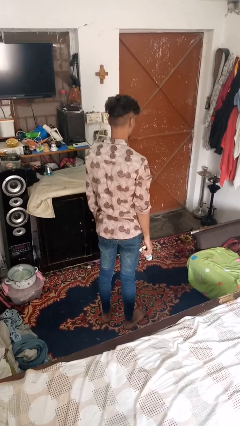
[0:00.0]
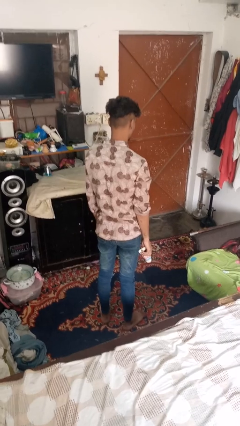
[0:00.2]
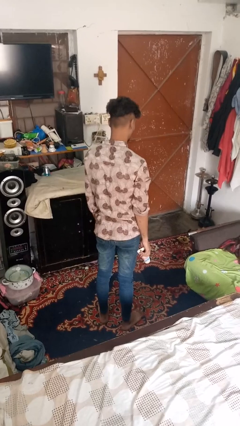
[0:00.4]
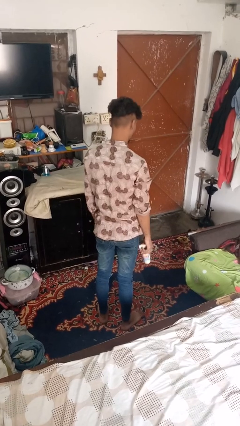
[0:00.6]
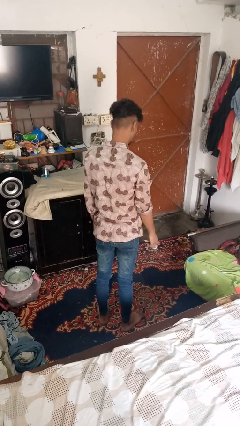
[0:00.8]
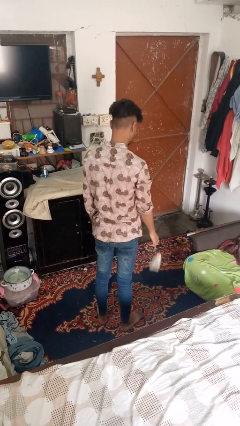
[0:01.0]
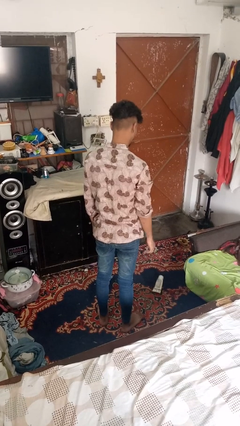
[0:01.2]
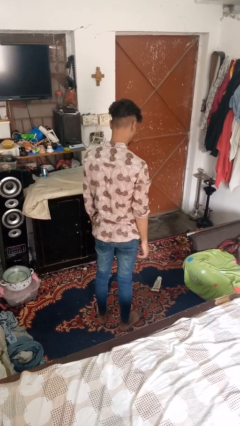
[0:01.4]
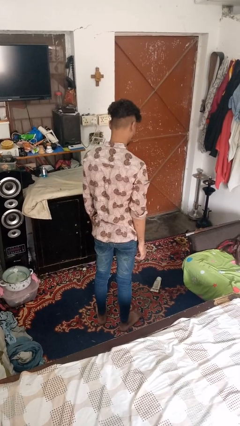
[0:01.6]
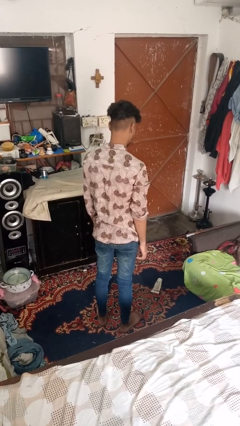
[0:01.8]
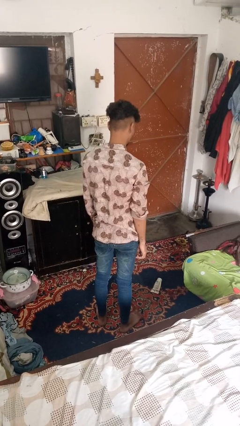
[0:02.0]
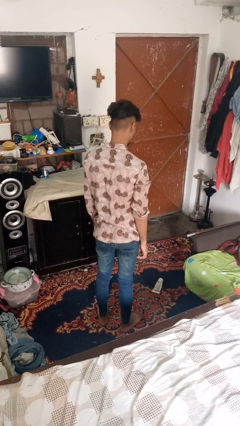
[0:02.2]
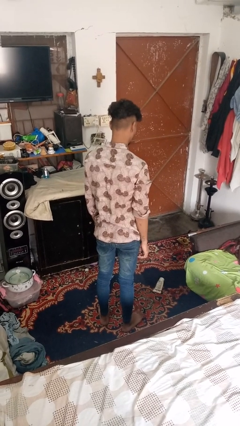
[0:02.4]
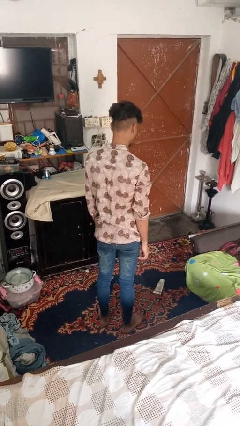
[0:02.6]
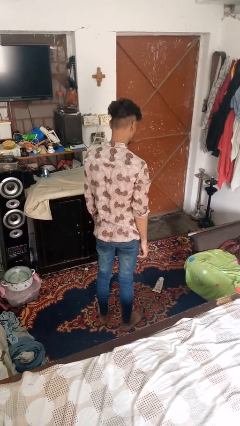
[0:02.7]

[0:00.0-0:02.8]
person throws object to ground

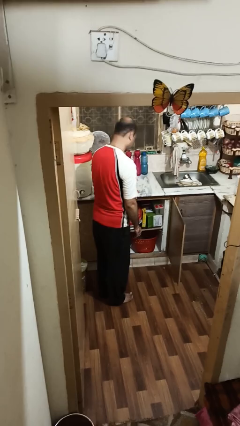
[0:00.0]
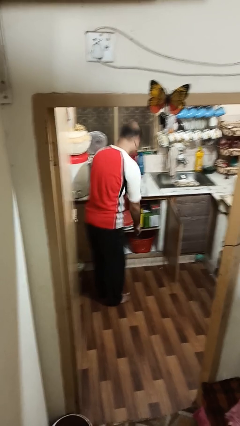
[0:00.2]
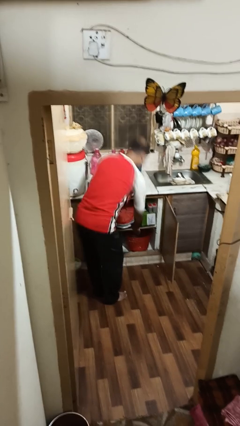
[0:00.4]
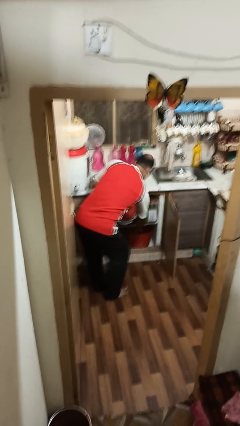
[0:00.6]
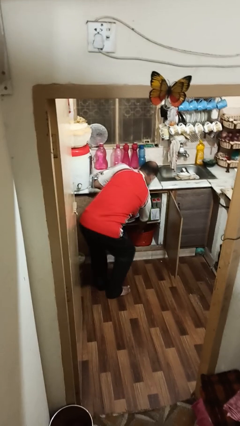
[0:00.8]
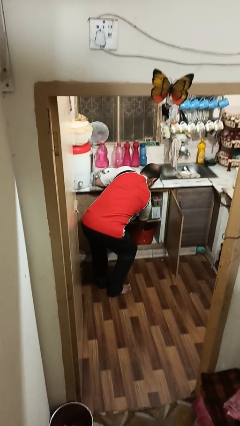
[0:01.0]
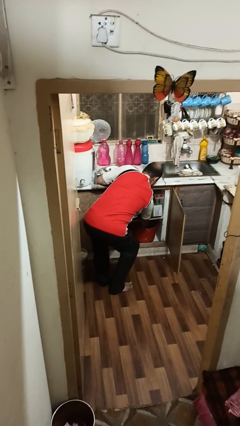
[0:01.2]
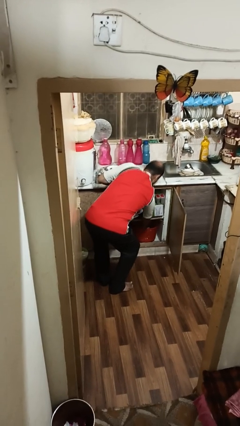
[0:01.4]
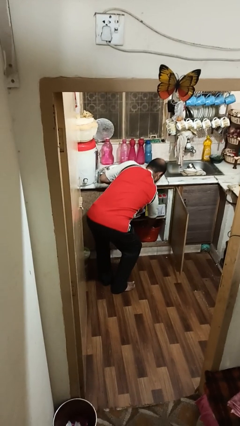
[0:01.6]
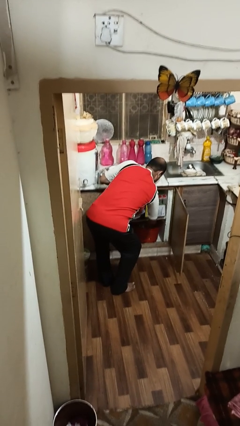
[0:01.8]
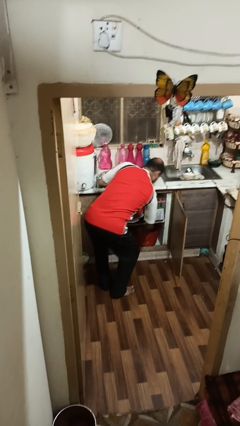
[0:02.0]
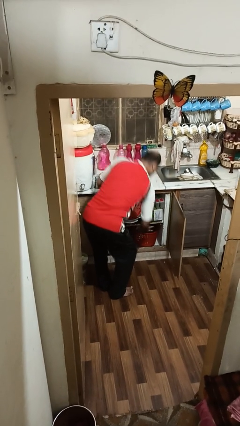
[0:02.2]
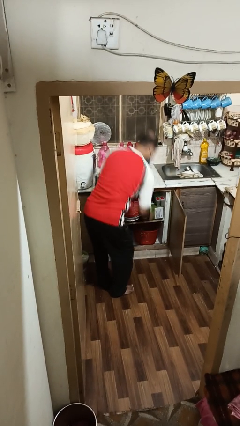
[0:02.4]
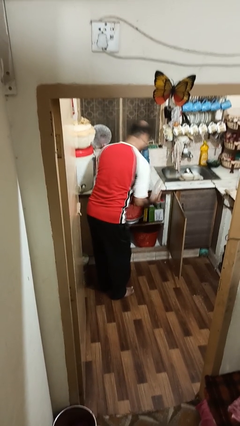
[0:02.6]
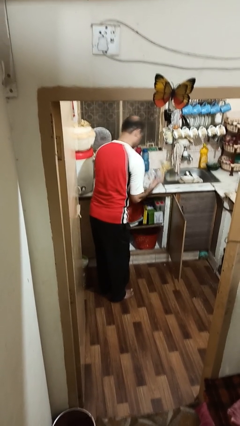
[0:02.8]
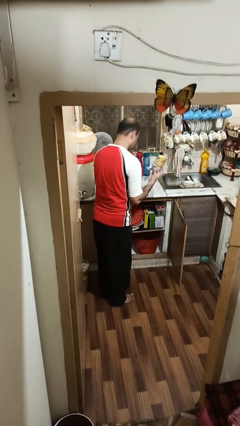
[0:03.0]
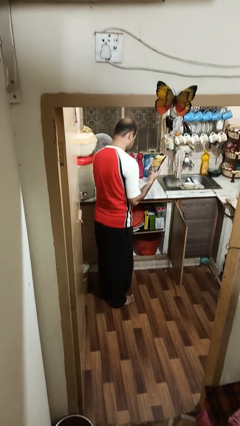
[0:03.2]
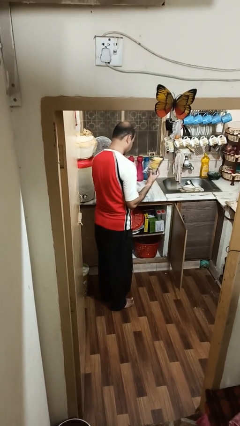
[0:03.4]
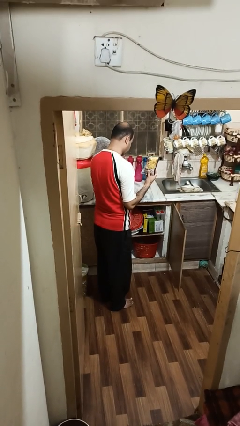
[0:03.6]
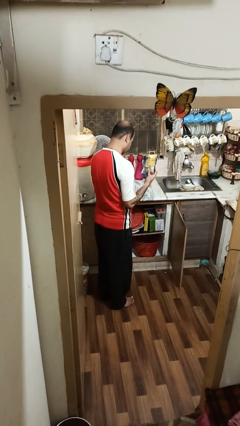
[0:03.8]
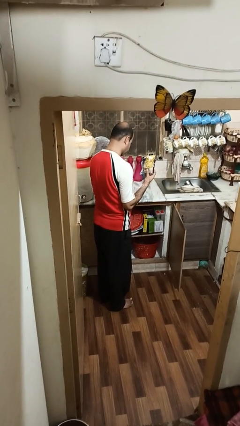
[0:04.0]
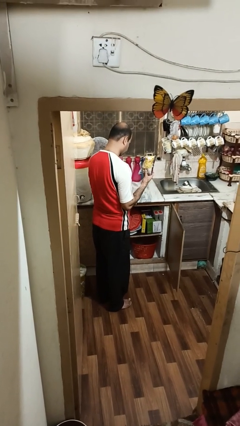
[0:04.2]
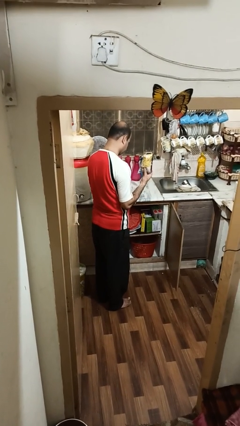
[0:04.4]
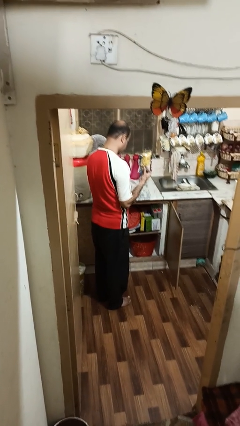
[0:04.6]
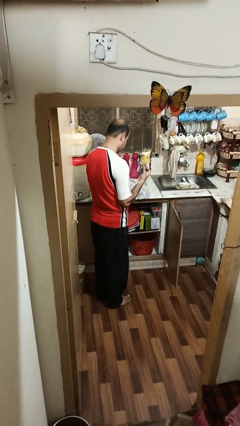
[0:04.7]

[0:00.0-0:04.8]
person takes object from cabinet

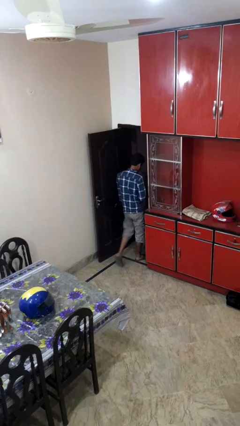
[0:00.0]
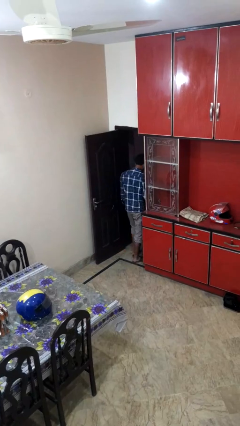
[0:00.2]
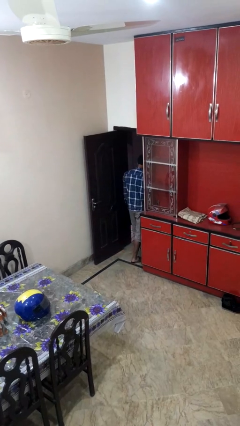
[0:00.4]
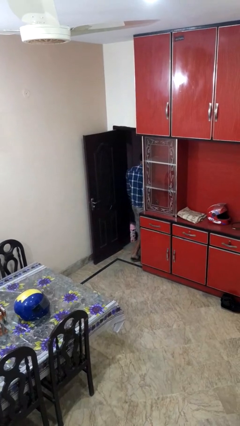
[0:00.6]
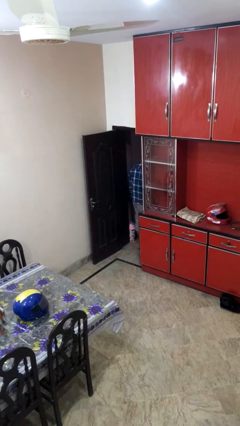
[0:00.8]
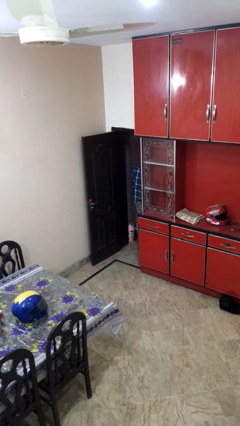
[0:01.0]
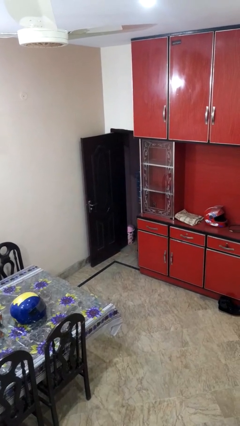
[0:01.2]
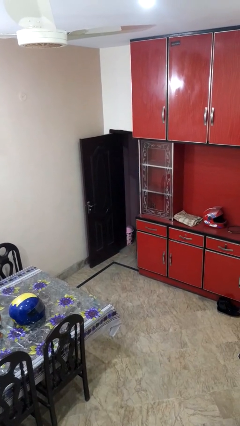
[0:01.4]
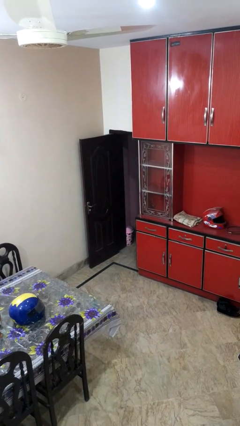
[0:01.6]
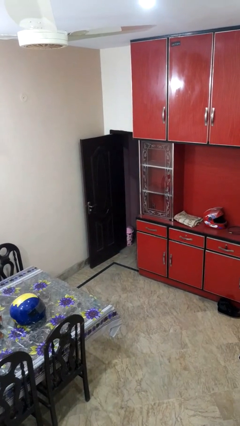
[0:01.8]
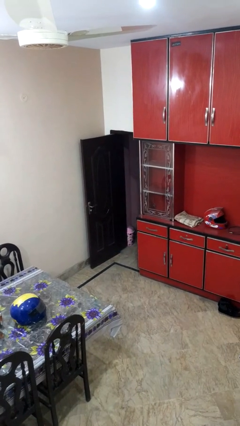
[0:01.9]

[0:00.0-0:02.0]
person exits scene through structure

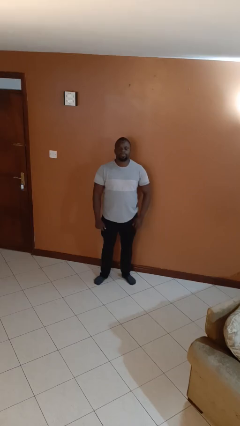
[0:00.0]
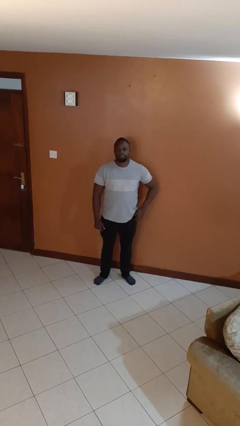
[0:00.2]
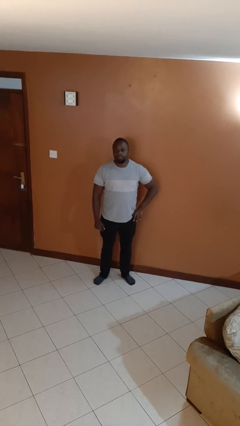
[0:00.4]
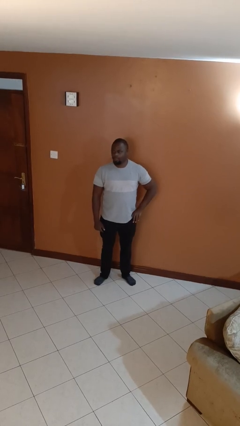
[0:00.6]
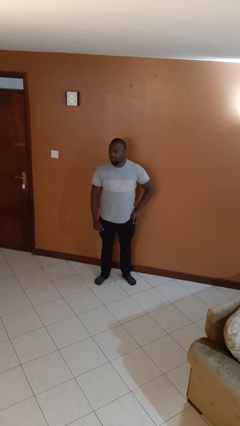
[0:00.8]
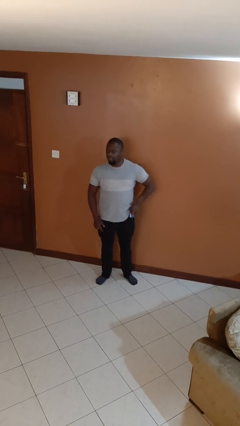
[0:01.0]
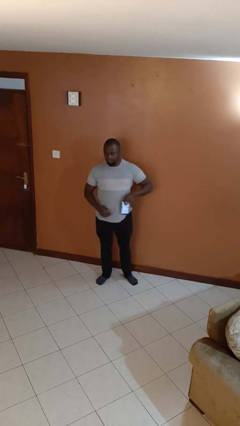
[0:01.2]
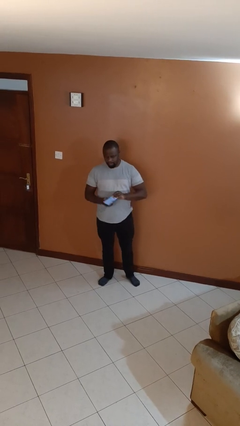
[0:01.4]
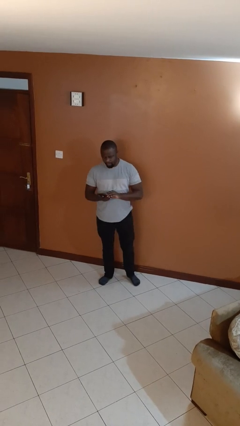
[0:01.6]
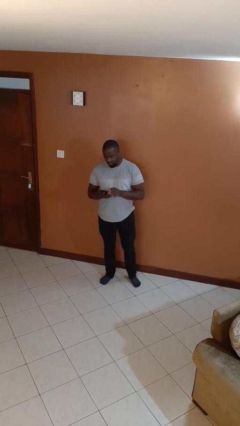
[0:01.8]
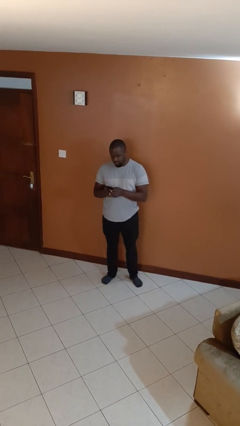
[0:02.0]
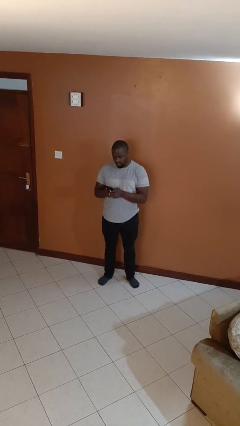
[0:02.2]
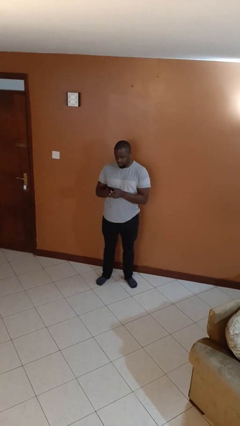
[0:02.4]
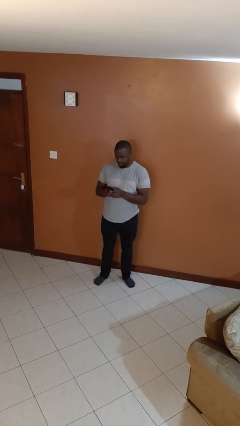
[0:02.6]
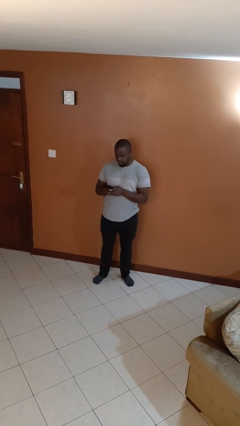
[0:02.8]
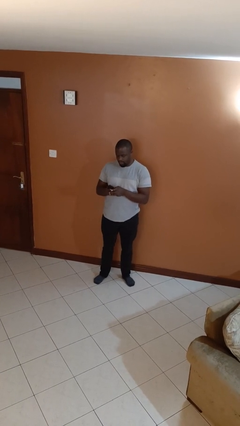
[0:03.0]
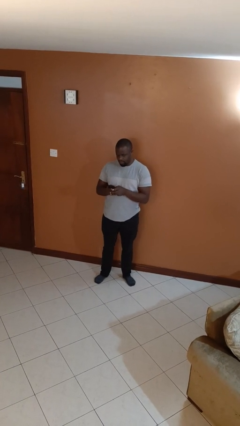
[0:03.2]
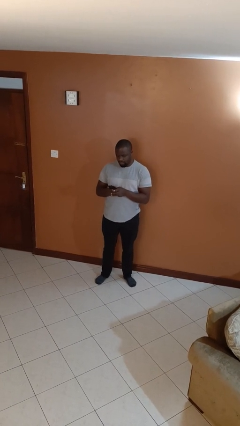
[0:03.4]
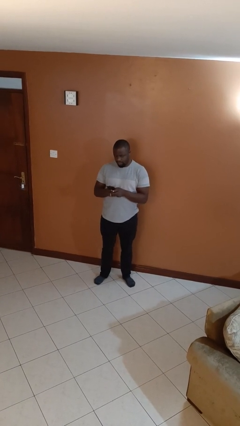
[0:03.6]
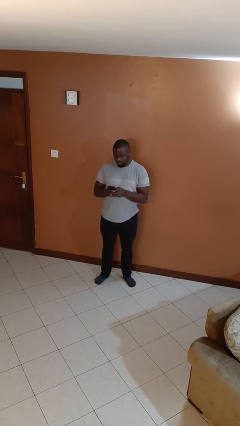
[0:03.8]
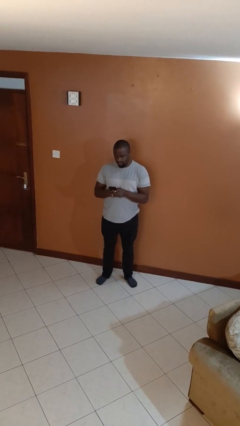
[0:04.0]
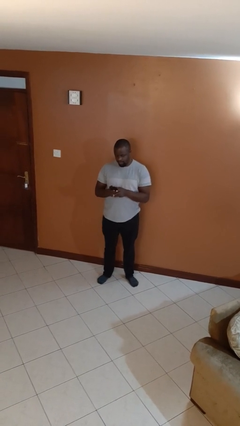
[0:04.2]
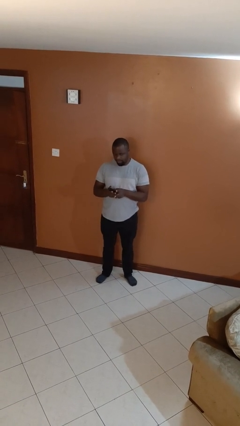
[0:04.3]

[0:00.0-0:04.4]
person takes phone from pocket

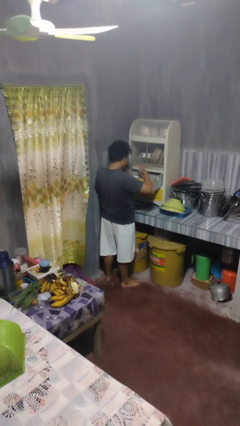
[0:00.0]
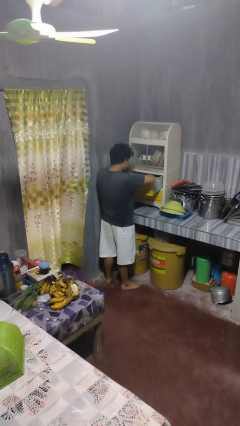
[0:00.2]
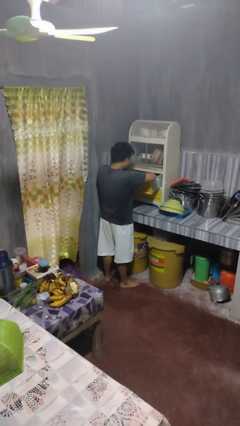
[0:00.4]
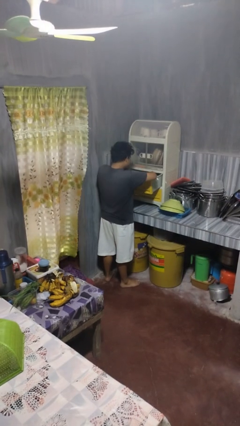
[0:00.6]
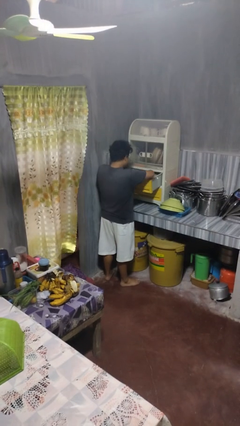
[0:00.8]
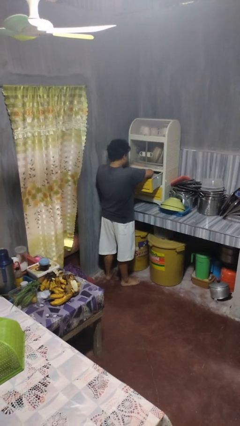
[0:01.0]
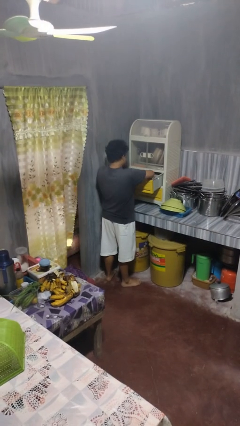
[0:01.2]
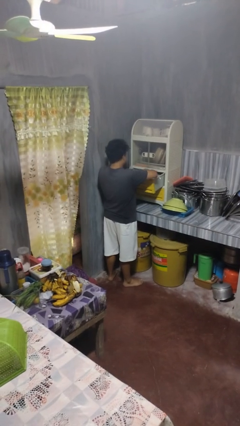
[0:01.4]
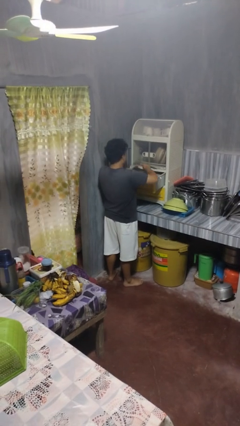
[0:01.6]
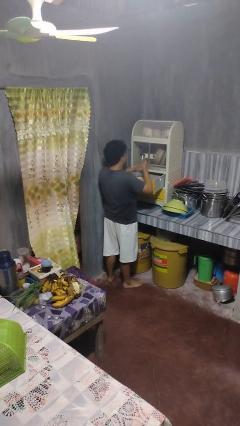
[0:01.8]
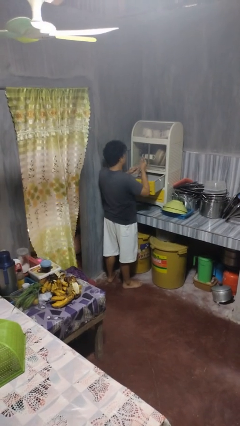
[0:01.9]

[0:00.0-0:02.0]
person takes object from kitchen drawer

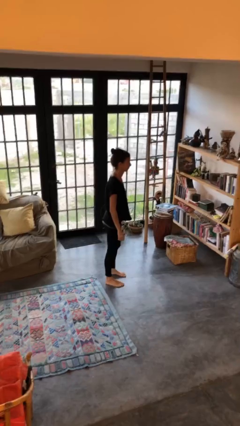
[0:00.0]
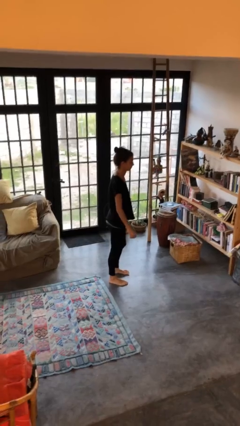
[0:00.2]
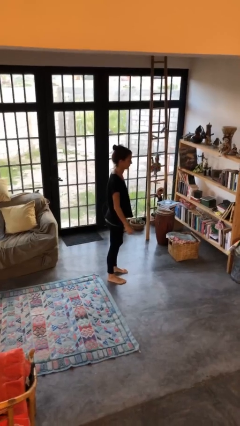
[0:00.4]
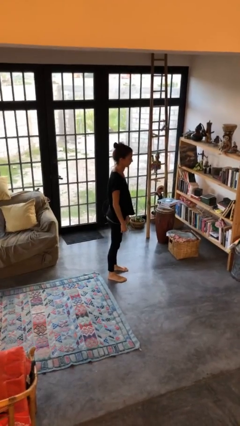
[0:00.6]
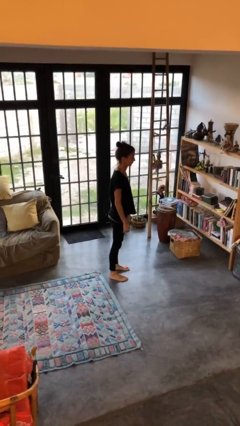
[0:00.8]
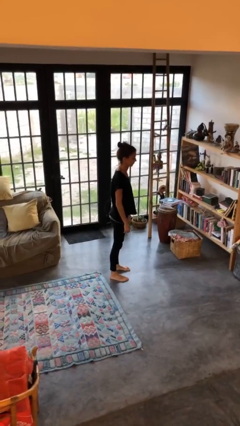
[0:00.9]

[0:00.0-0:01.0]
person stands up
